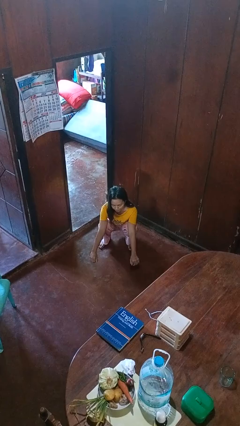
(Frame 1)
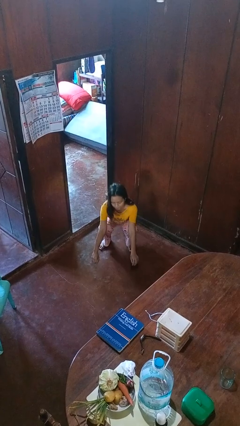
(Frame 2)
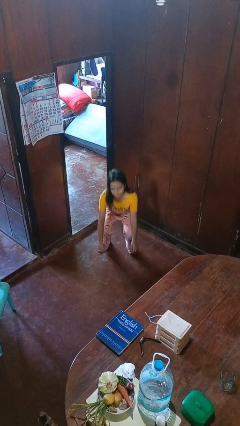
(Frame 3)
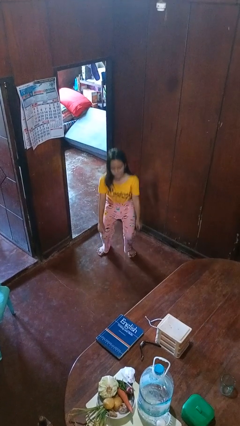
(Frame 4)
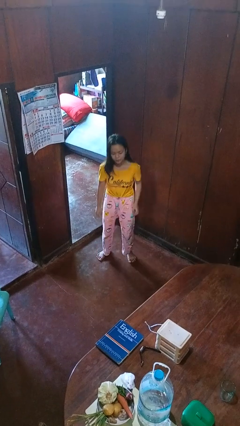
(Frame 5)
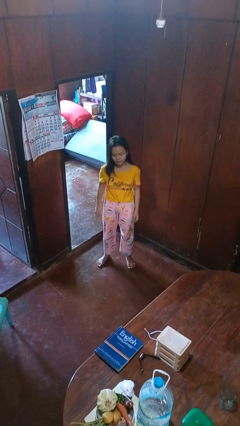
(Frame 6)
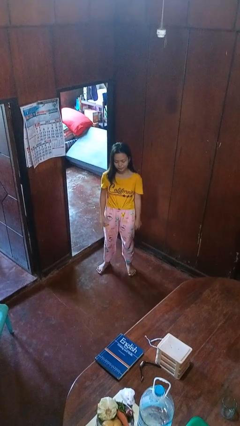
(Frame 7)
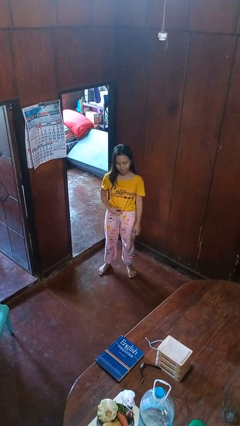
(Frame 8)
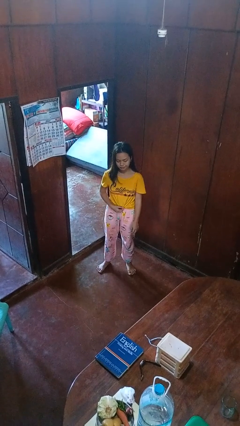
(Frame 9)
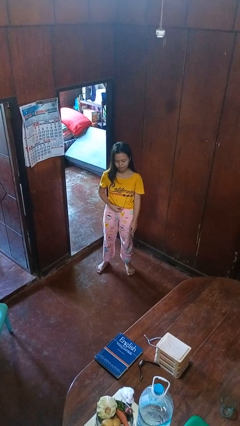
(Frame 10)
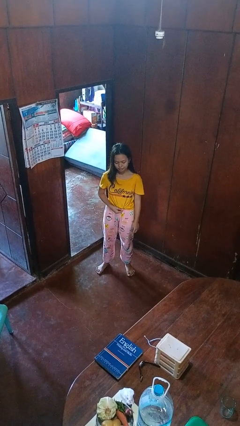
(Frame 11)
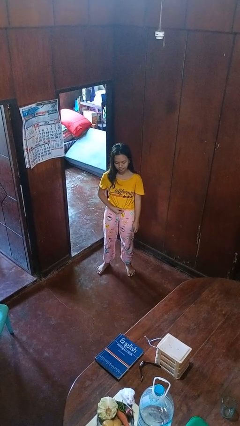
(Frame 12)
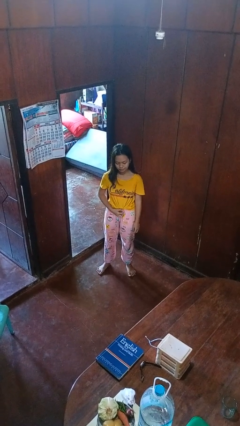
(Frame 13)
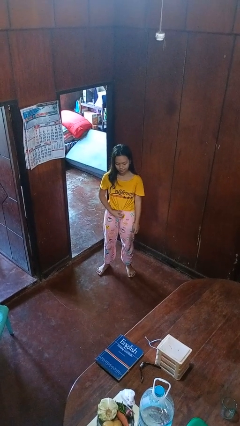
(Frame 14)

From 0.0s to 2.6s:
person stands up

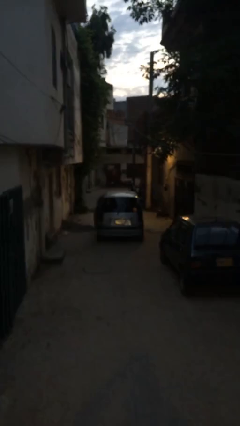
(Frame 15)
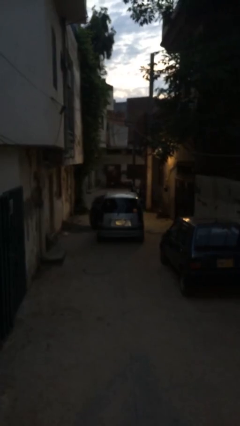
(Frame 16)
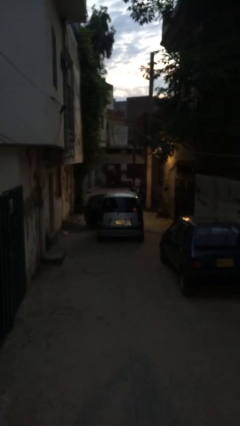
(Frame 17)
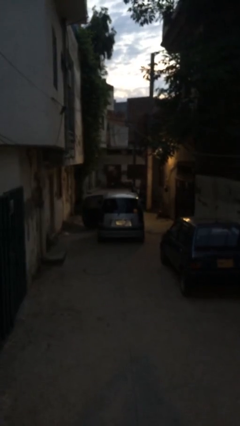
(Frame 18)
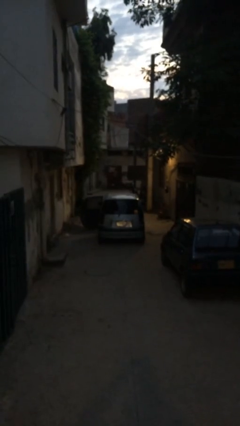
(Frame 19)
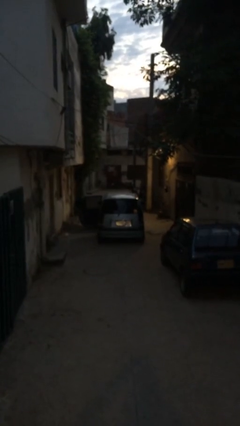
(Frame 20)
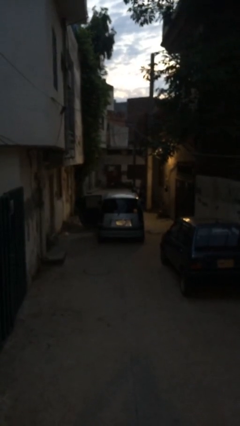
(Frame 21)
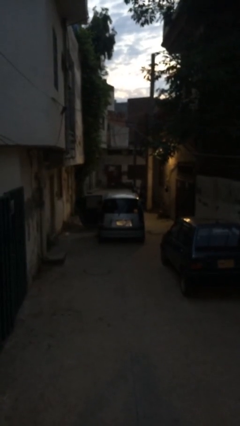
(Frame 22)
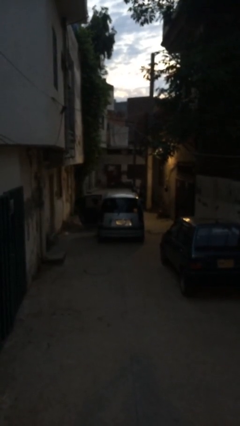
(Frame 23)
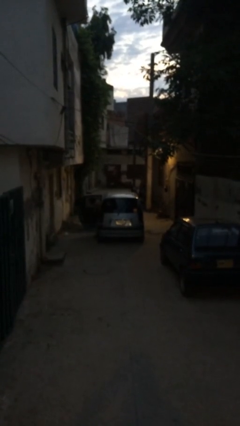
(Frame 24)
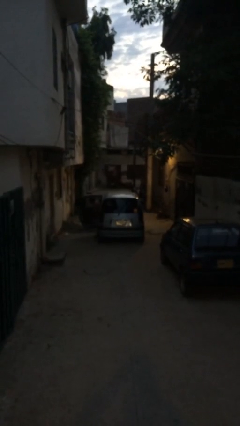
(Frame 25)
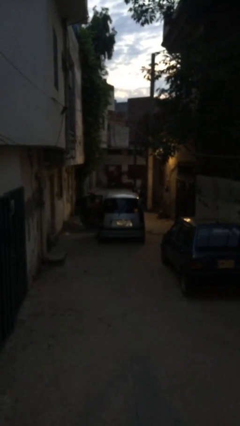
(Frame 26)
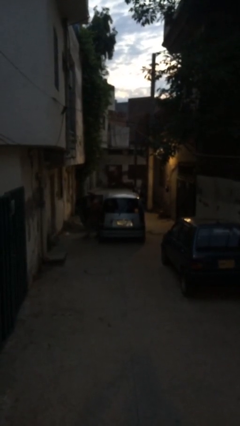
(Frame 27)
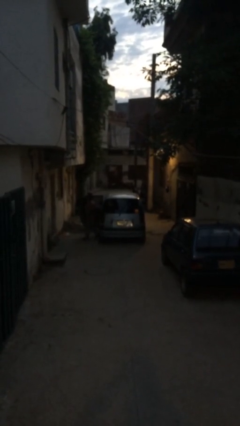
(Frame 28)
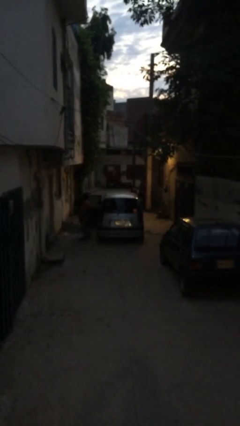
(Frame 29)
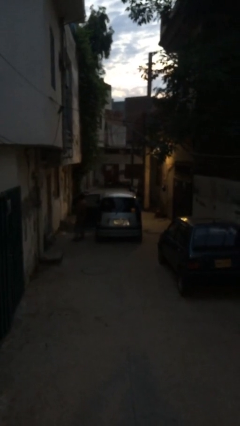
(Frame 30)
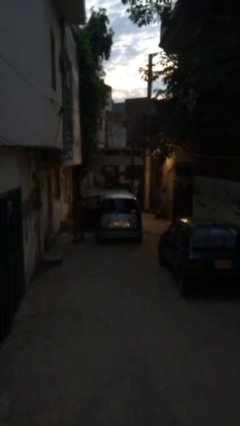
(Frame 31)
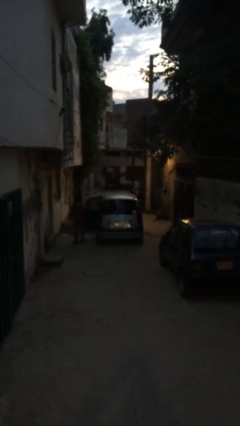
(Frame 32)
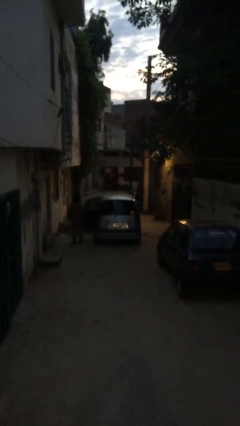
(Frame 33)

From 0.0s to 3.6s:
car drops off person

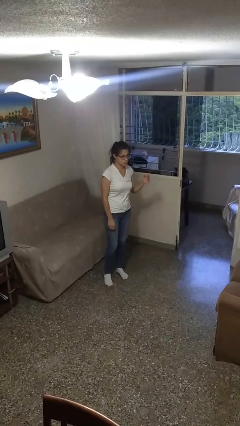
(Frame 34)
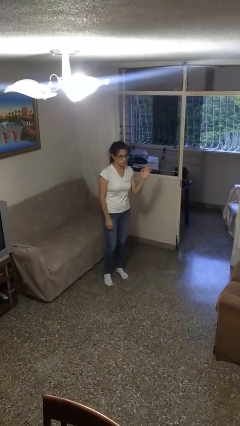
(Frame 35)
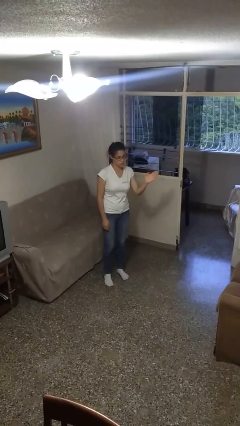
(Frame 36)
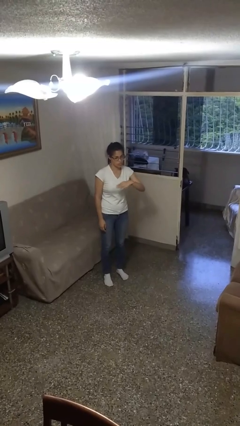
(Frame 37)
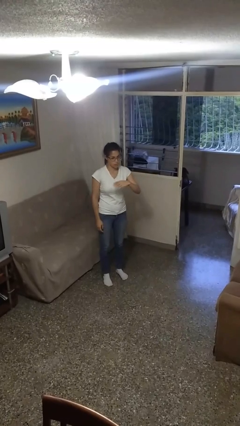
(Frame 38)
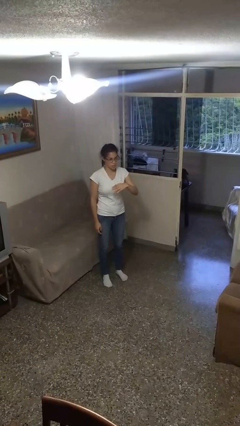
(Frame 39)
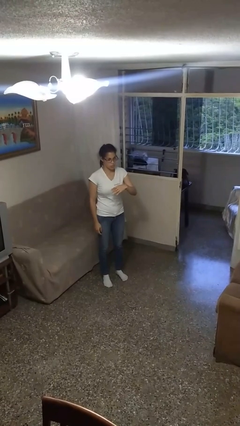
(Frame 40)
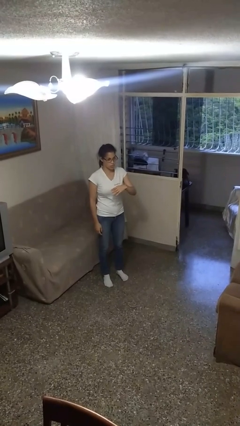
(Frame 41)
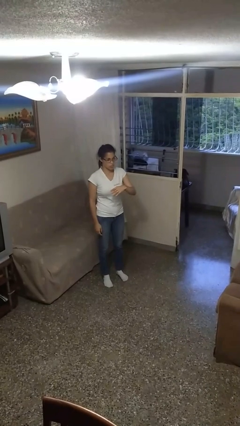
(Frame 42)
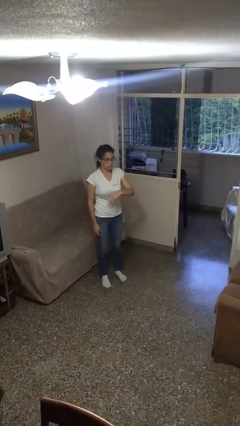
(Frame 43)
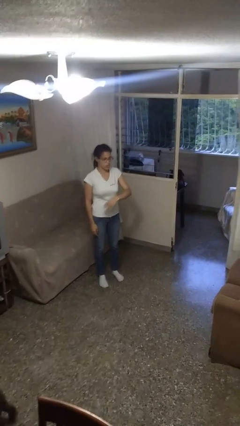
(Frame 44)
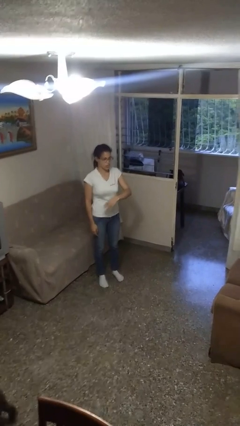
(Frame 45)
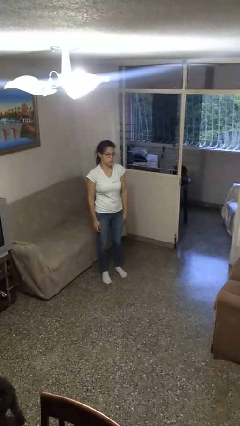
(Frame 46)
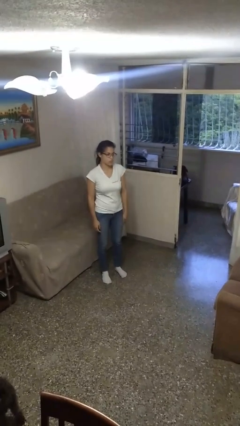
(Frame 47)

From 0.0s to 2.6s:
person gestures swipe right

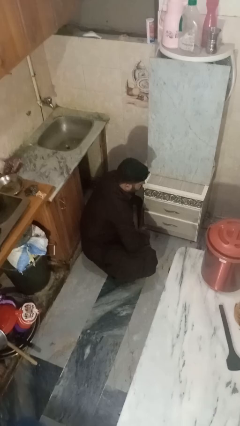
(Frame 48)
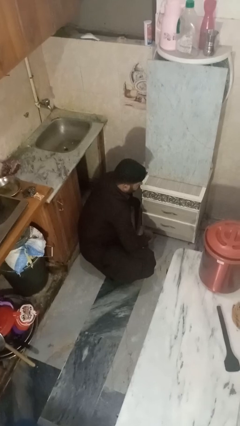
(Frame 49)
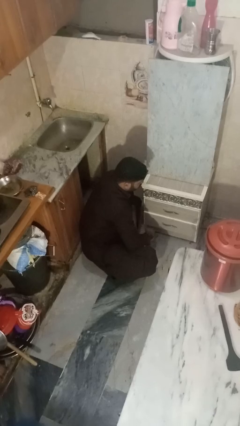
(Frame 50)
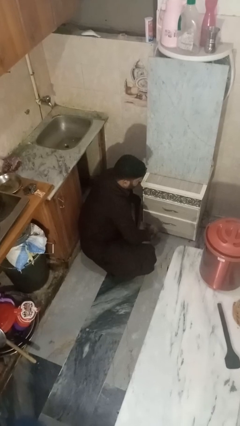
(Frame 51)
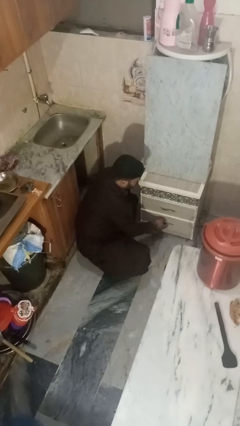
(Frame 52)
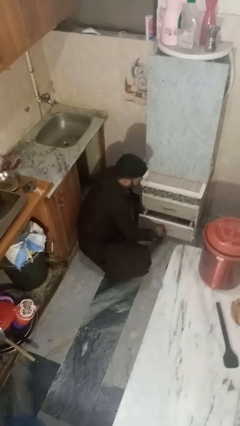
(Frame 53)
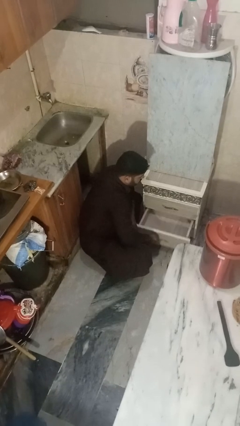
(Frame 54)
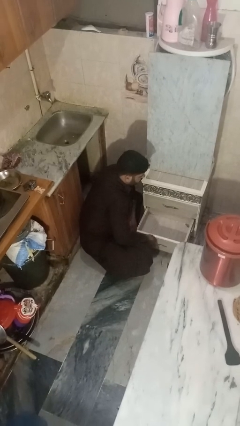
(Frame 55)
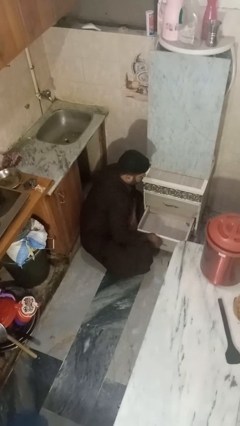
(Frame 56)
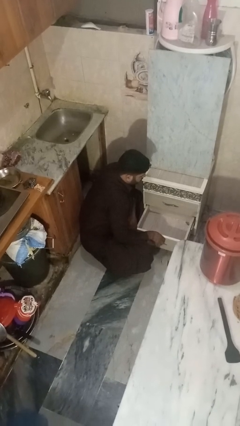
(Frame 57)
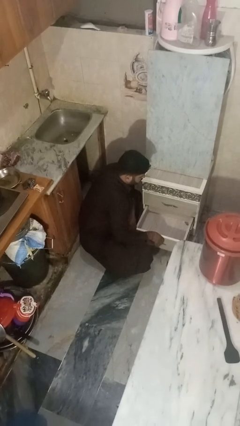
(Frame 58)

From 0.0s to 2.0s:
person opens kitchen drawer

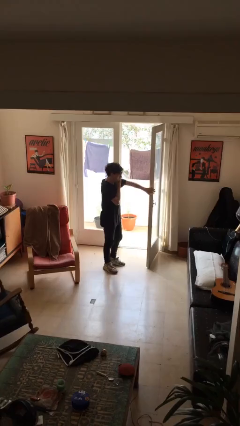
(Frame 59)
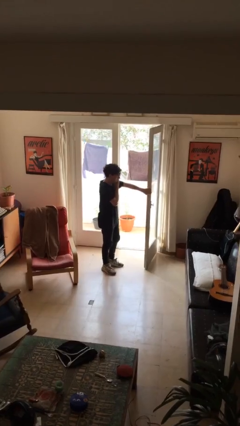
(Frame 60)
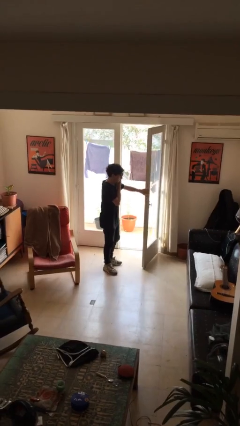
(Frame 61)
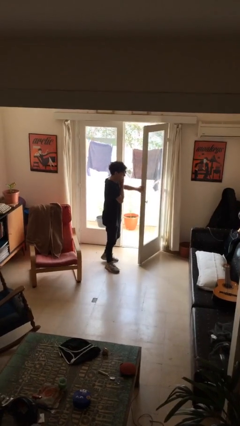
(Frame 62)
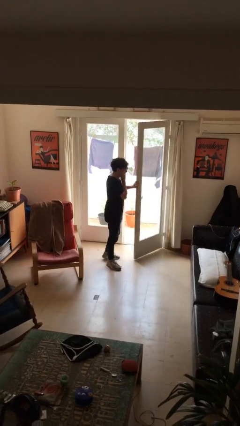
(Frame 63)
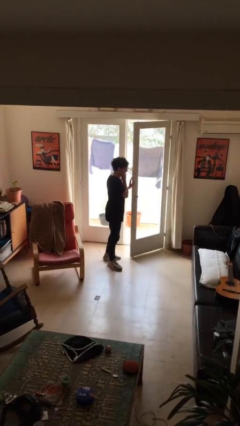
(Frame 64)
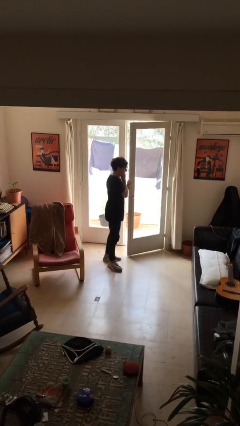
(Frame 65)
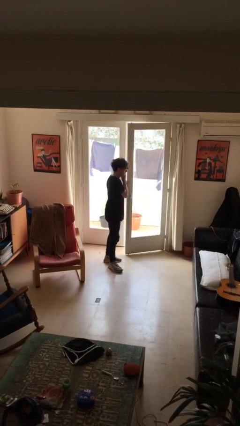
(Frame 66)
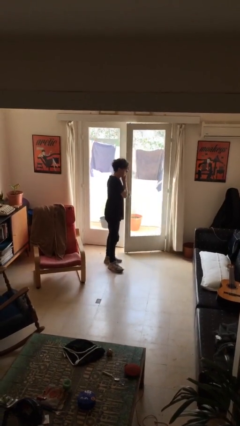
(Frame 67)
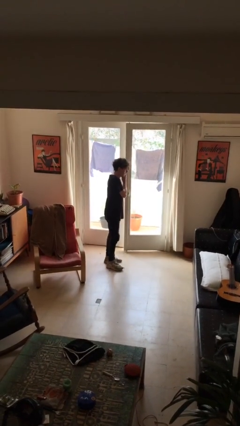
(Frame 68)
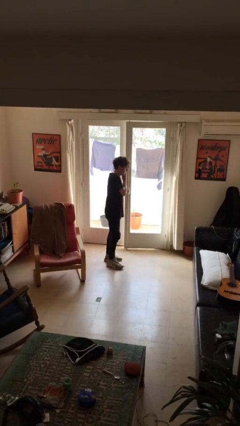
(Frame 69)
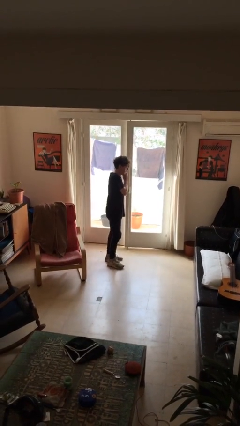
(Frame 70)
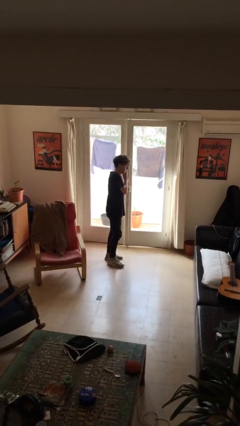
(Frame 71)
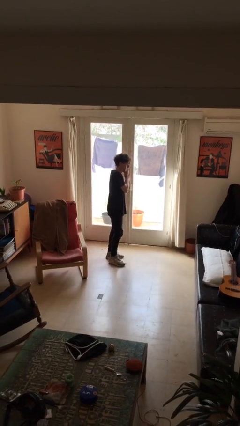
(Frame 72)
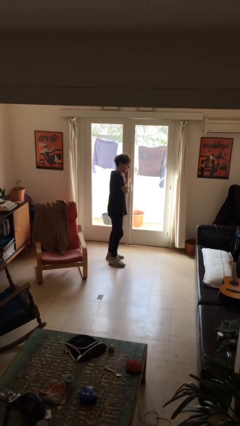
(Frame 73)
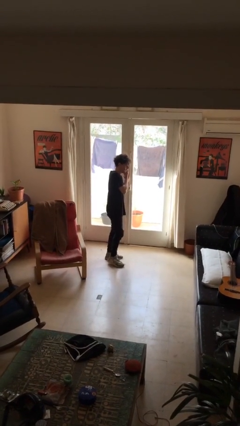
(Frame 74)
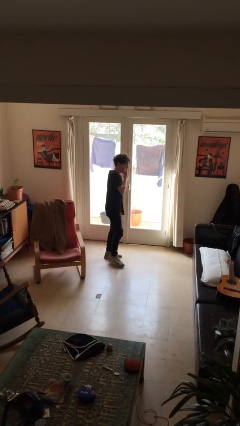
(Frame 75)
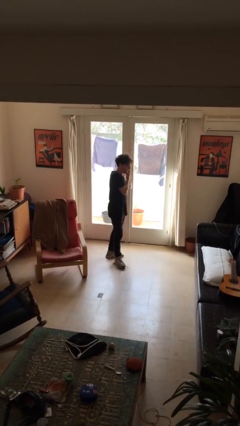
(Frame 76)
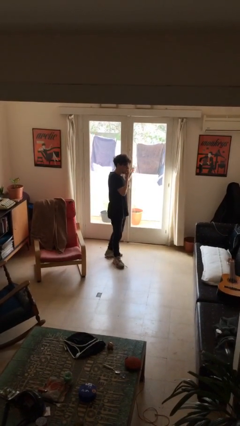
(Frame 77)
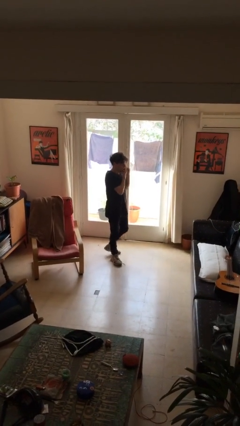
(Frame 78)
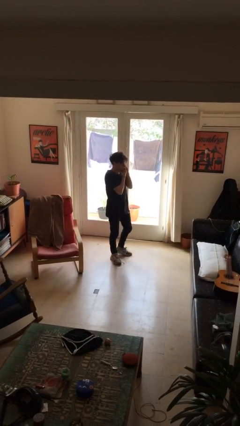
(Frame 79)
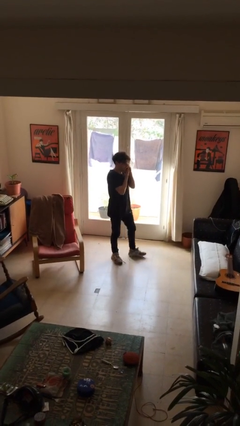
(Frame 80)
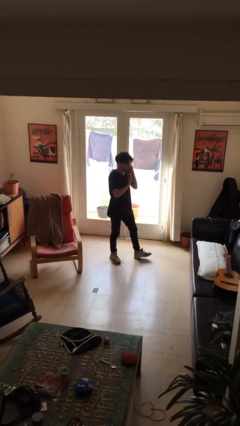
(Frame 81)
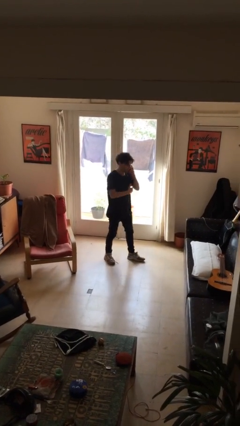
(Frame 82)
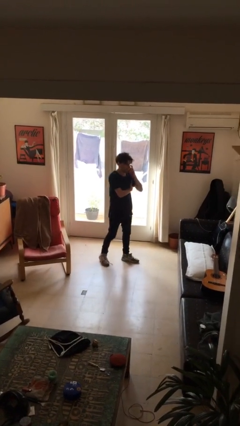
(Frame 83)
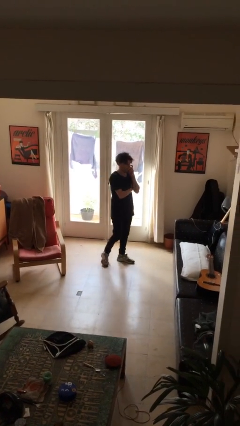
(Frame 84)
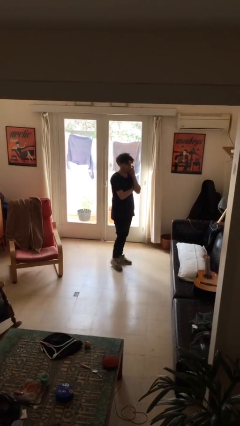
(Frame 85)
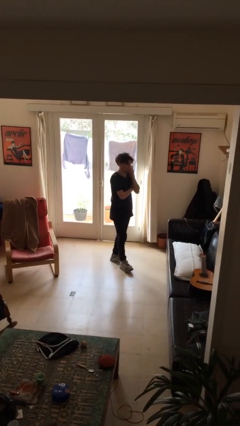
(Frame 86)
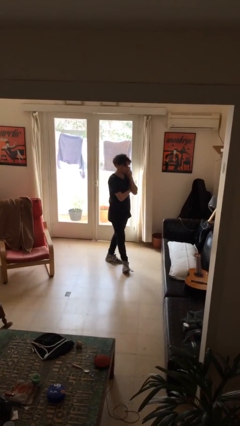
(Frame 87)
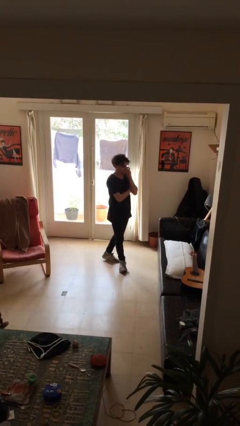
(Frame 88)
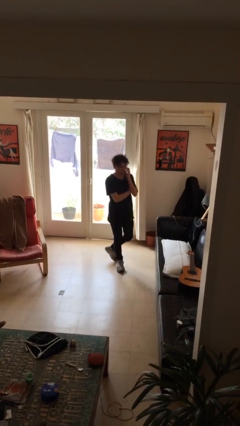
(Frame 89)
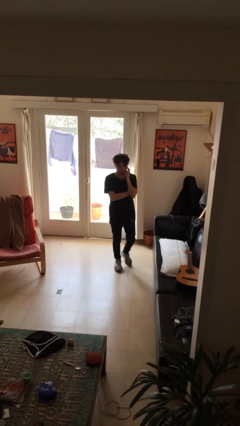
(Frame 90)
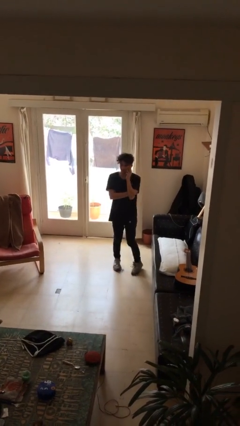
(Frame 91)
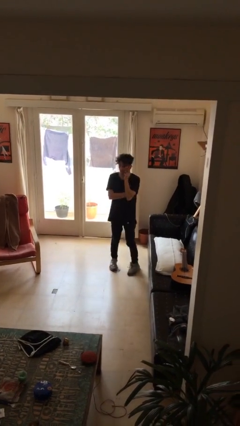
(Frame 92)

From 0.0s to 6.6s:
person closes facility door
